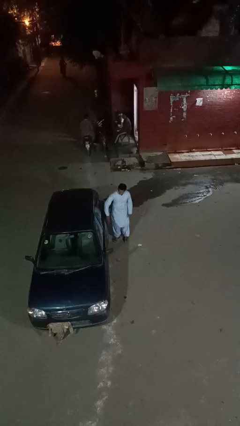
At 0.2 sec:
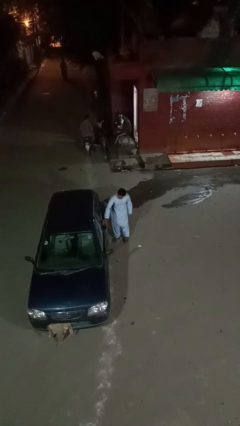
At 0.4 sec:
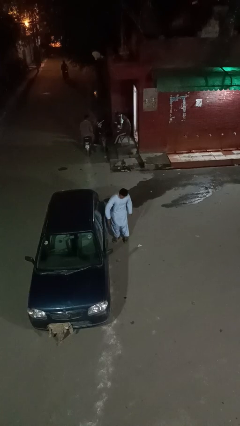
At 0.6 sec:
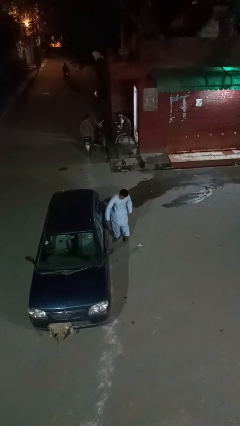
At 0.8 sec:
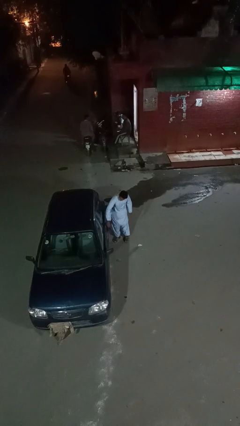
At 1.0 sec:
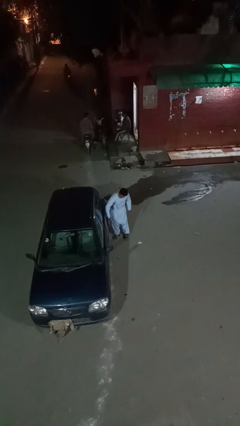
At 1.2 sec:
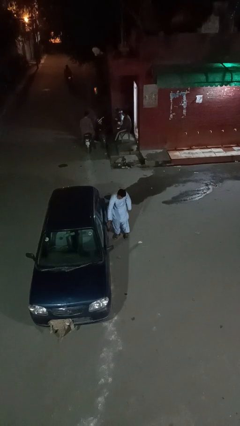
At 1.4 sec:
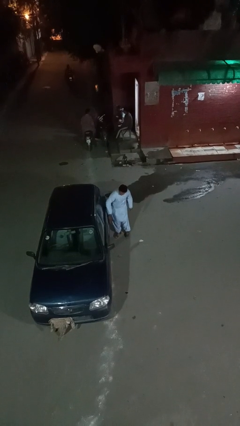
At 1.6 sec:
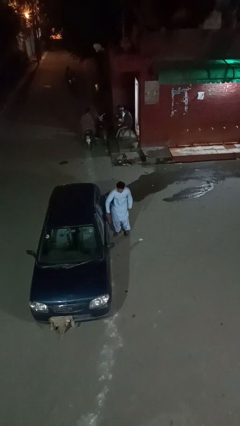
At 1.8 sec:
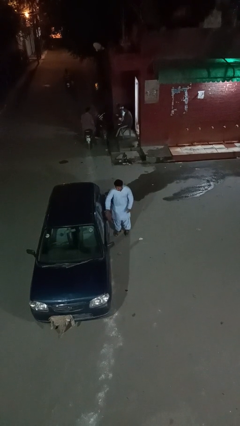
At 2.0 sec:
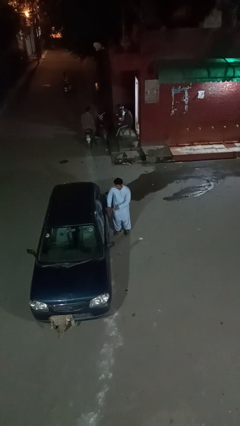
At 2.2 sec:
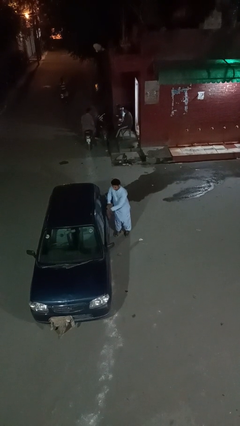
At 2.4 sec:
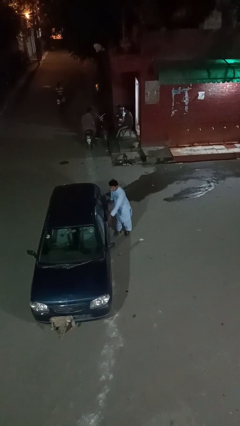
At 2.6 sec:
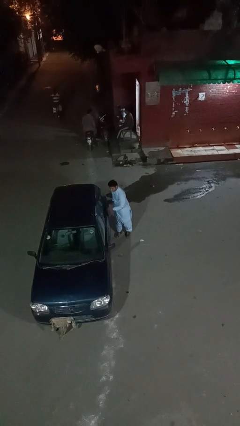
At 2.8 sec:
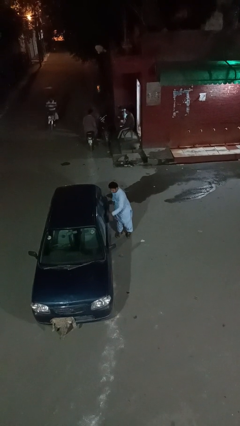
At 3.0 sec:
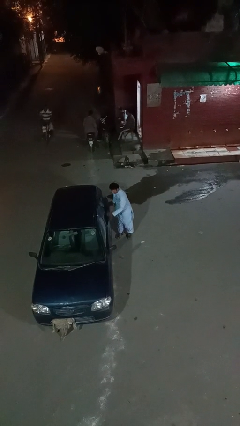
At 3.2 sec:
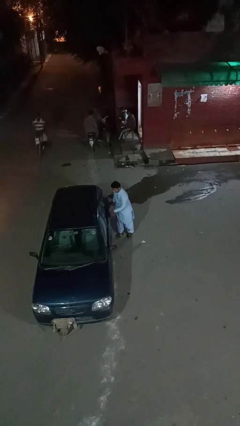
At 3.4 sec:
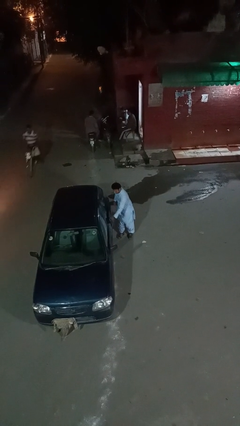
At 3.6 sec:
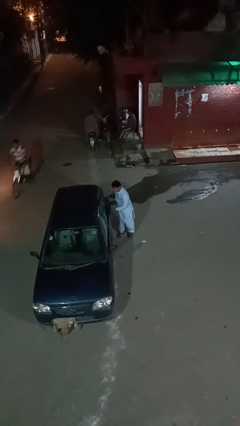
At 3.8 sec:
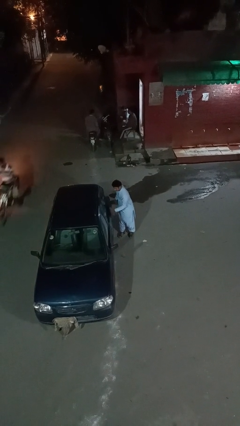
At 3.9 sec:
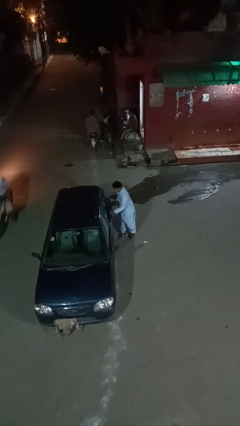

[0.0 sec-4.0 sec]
person polishes car with rag

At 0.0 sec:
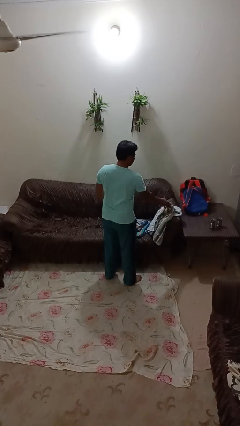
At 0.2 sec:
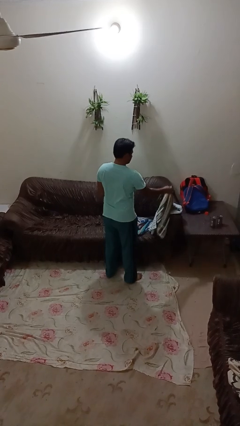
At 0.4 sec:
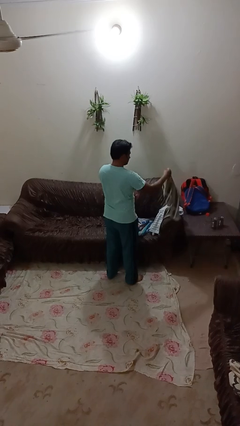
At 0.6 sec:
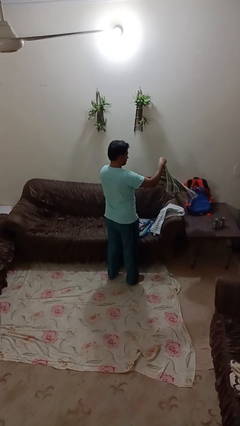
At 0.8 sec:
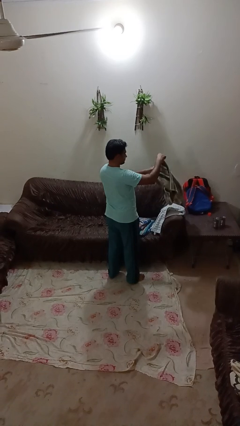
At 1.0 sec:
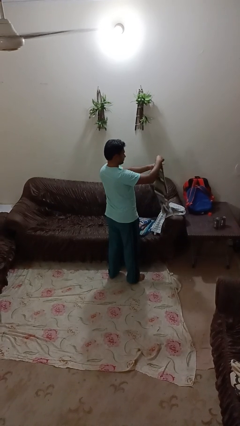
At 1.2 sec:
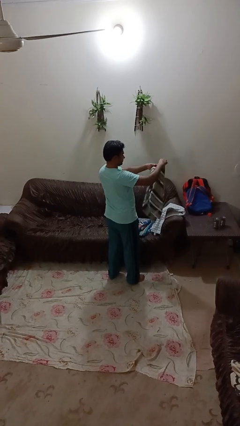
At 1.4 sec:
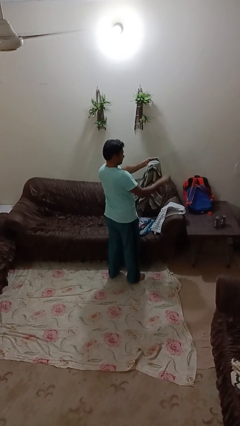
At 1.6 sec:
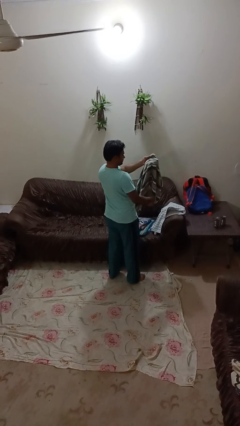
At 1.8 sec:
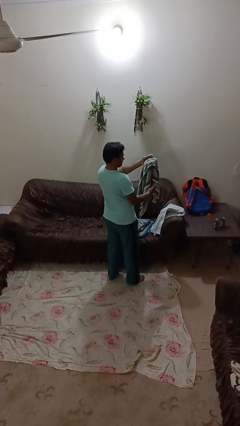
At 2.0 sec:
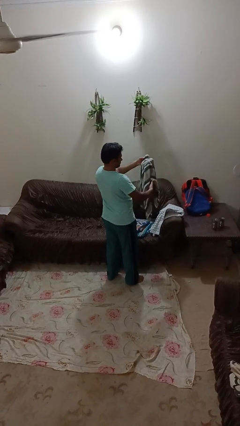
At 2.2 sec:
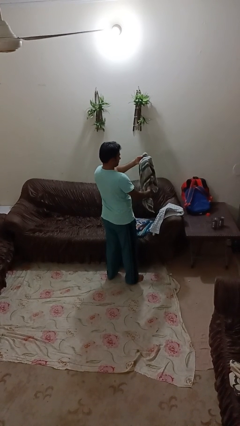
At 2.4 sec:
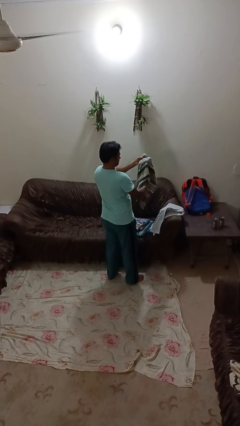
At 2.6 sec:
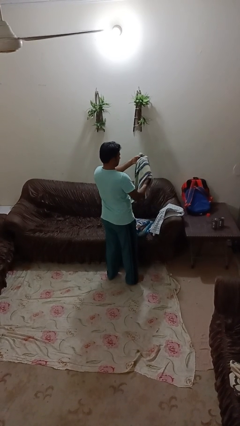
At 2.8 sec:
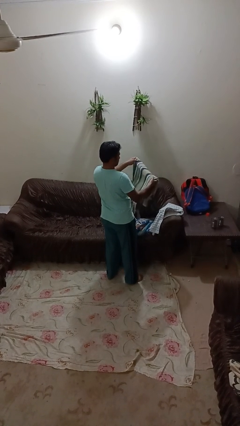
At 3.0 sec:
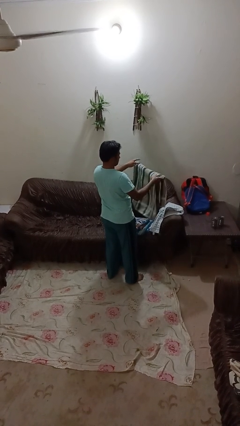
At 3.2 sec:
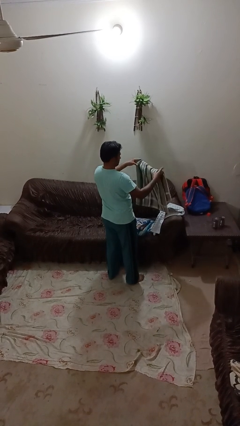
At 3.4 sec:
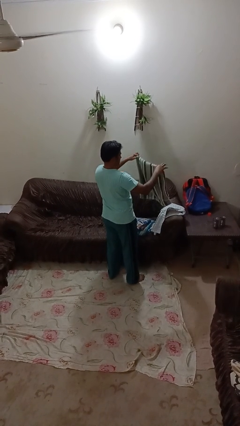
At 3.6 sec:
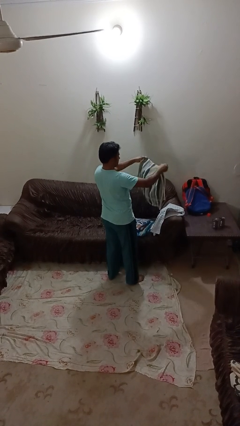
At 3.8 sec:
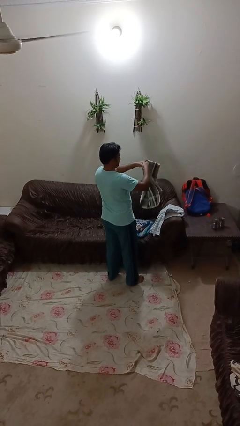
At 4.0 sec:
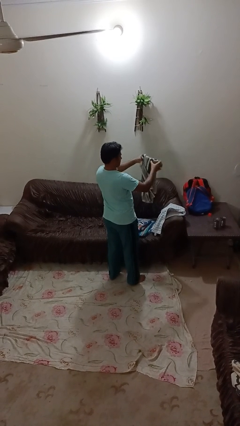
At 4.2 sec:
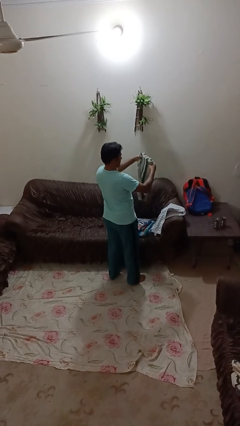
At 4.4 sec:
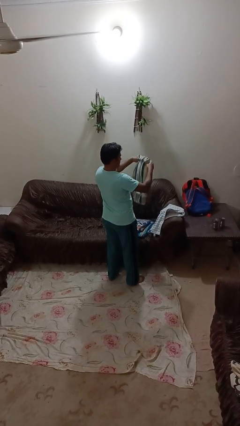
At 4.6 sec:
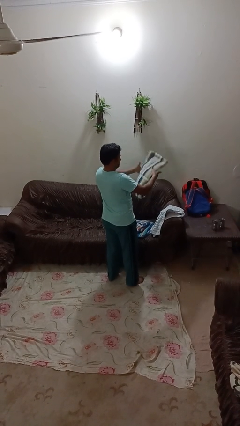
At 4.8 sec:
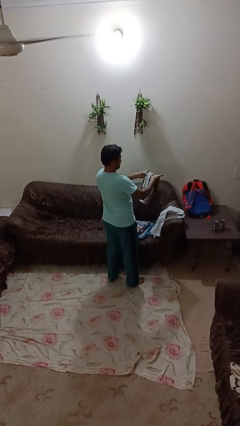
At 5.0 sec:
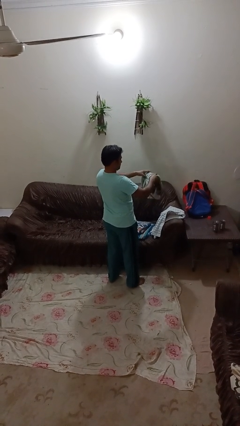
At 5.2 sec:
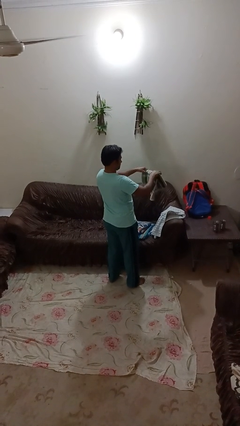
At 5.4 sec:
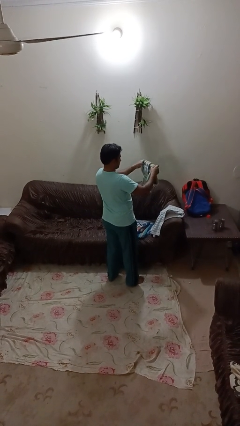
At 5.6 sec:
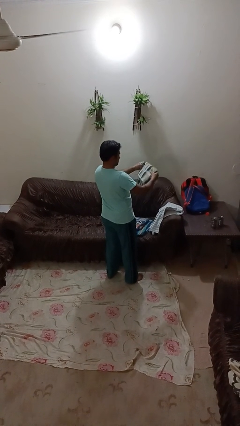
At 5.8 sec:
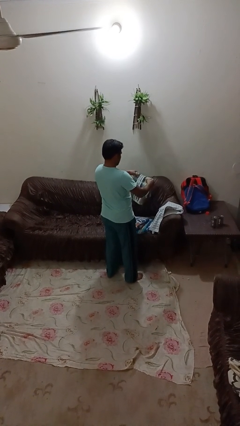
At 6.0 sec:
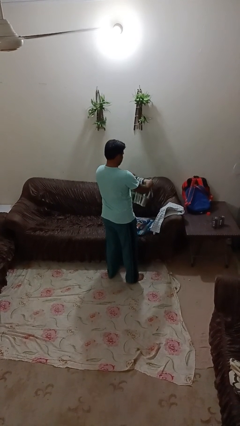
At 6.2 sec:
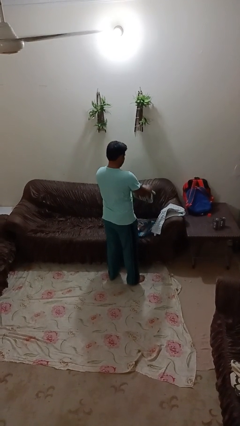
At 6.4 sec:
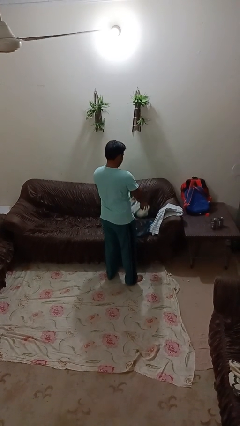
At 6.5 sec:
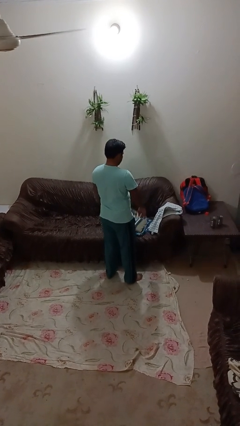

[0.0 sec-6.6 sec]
person folds towel

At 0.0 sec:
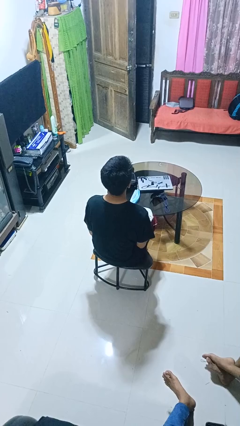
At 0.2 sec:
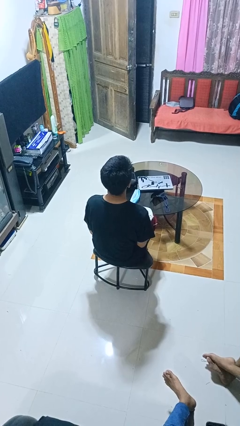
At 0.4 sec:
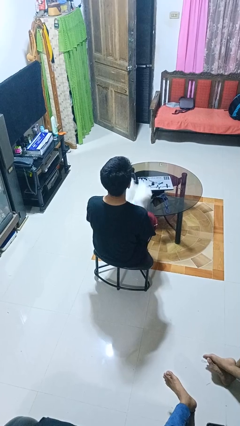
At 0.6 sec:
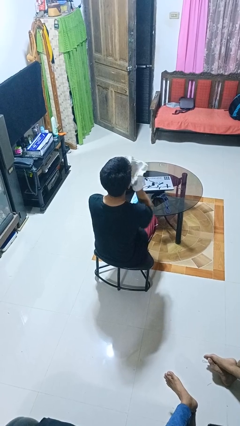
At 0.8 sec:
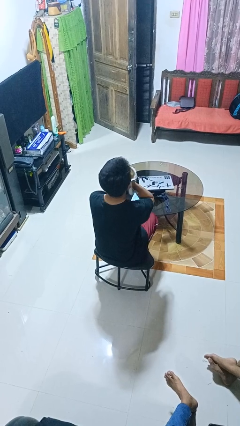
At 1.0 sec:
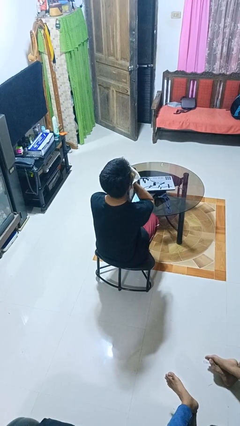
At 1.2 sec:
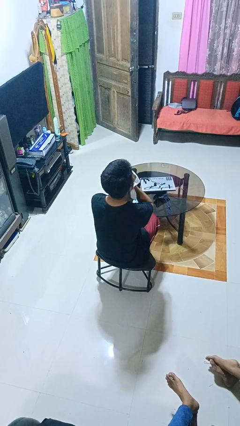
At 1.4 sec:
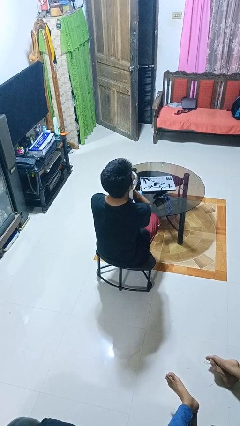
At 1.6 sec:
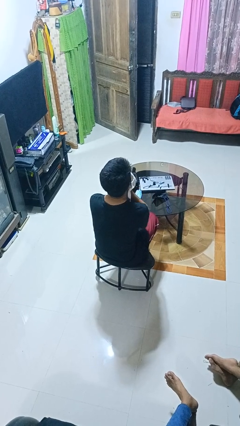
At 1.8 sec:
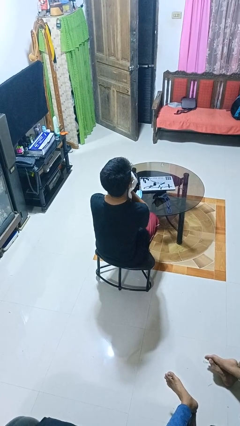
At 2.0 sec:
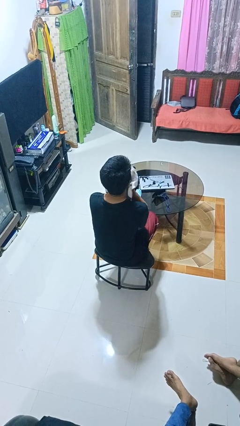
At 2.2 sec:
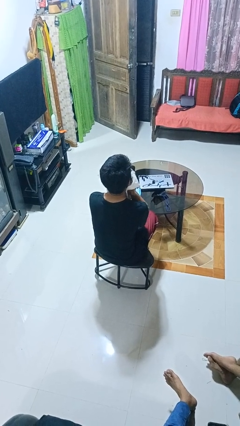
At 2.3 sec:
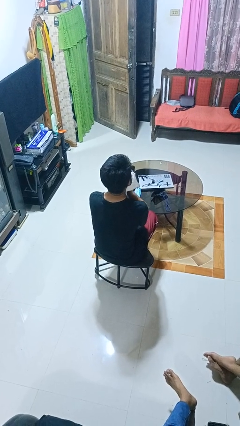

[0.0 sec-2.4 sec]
person wipes mouth with napkin

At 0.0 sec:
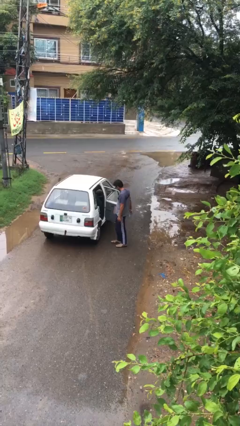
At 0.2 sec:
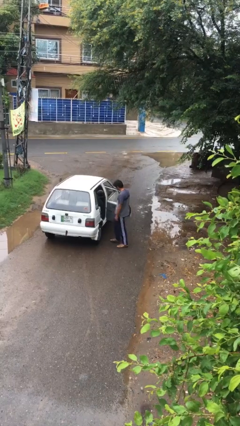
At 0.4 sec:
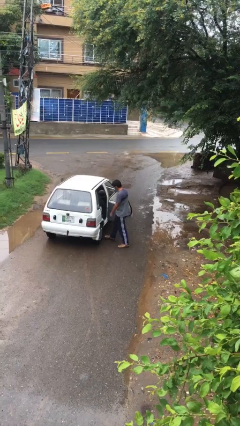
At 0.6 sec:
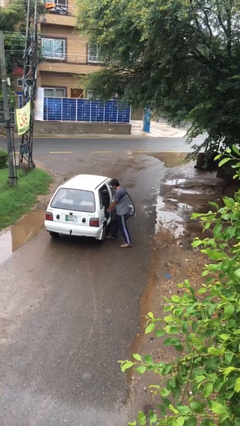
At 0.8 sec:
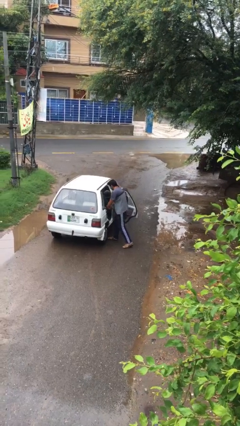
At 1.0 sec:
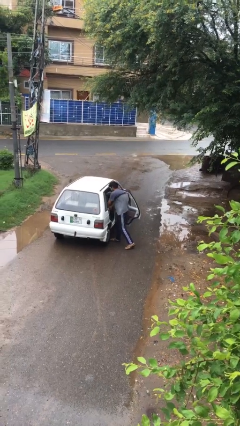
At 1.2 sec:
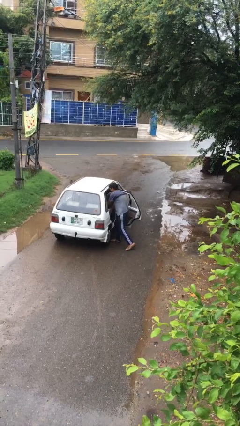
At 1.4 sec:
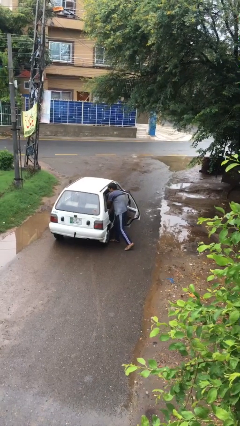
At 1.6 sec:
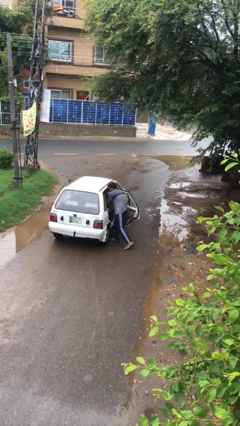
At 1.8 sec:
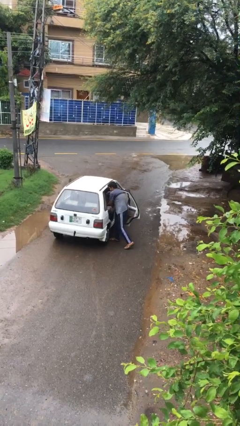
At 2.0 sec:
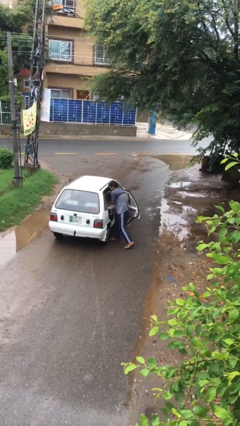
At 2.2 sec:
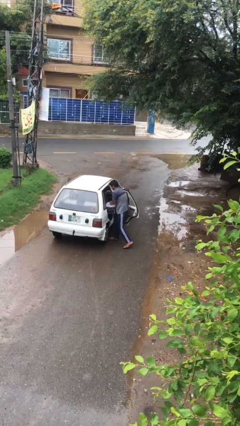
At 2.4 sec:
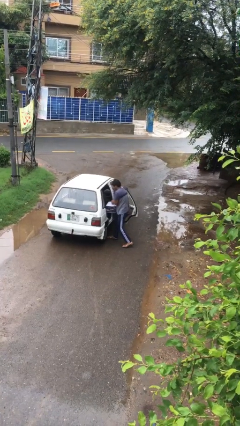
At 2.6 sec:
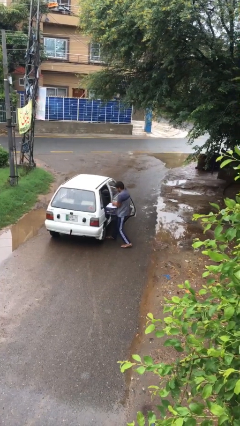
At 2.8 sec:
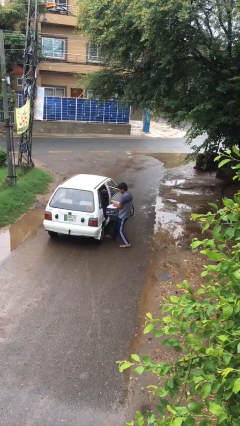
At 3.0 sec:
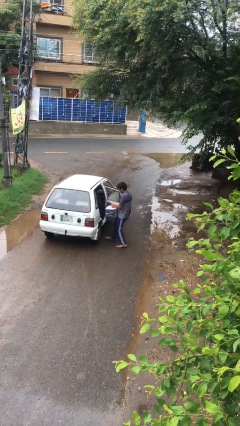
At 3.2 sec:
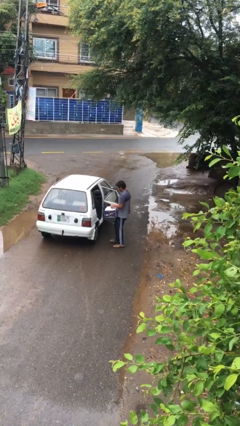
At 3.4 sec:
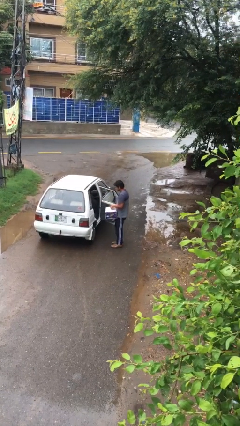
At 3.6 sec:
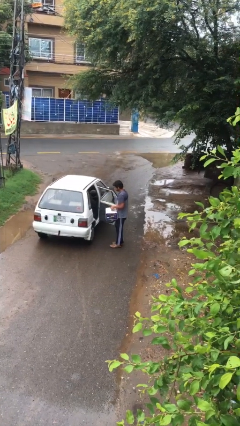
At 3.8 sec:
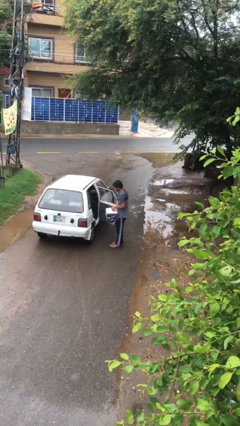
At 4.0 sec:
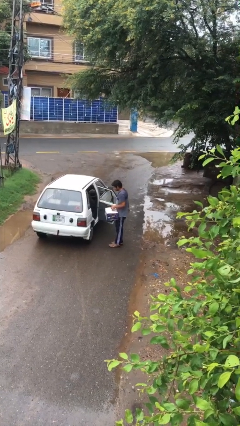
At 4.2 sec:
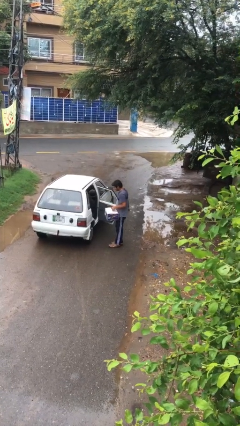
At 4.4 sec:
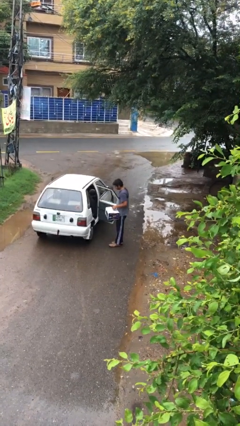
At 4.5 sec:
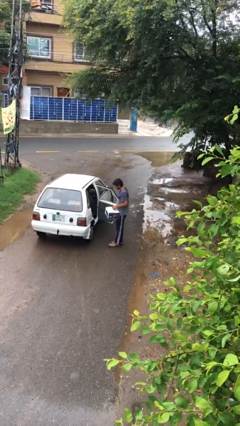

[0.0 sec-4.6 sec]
person unloads car

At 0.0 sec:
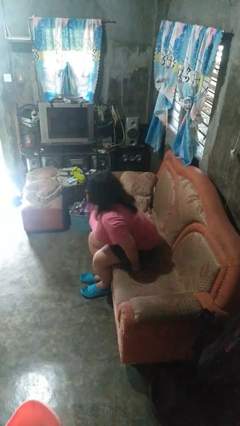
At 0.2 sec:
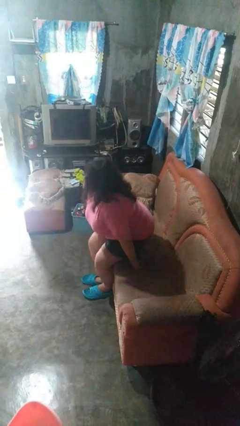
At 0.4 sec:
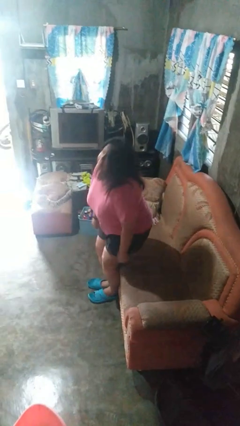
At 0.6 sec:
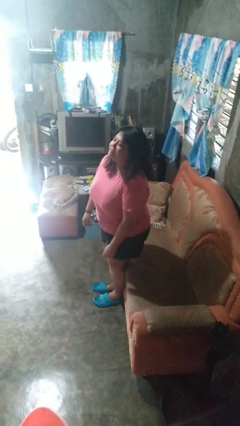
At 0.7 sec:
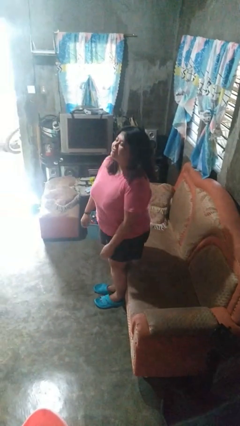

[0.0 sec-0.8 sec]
person stands up
